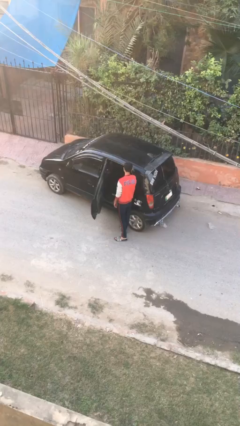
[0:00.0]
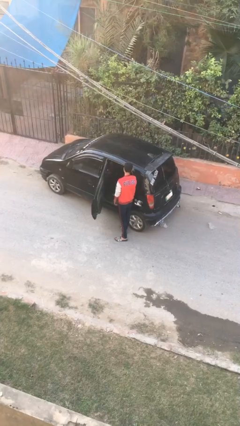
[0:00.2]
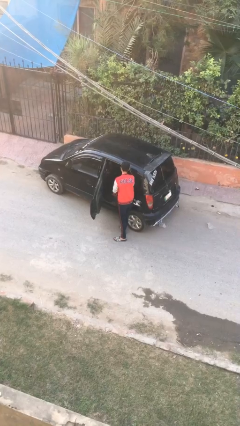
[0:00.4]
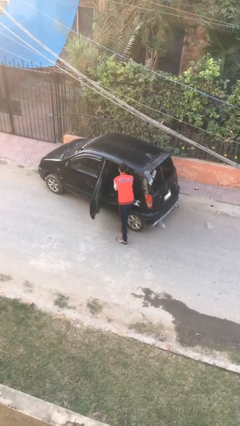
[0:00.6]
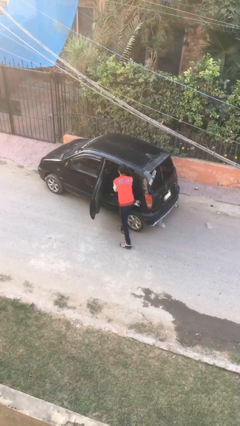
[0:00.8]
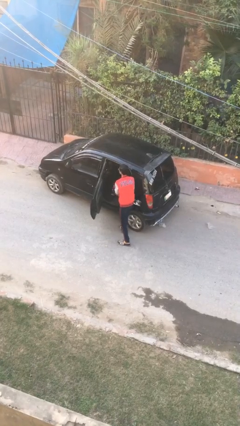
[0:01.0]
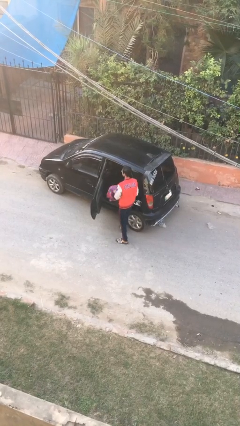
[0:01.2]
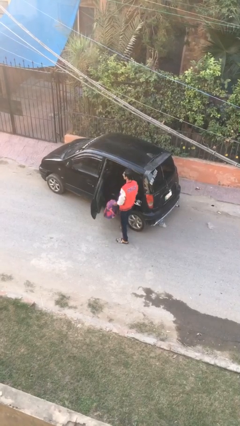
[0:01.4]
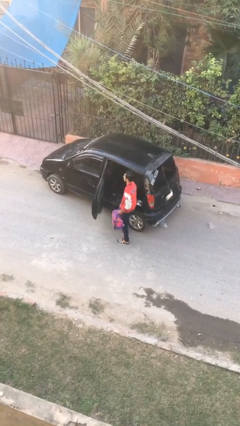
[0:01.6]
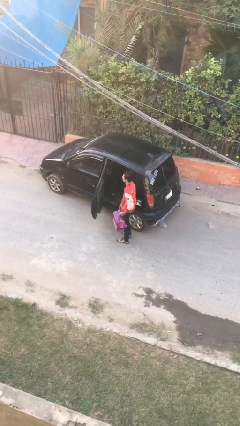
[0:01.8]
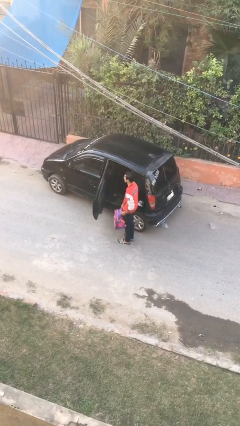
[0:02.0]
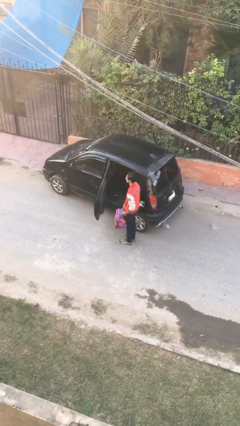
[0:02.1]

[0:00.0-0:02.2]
person unloads car

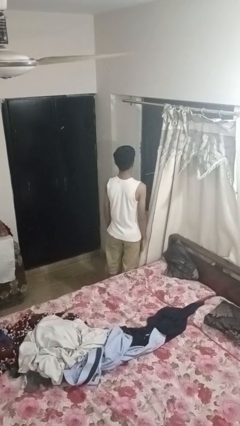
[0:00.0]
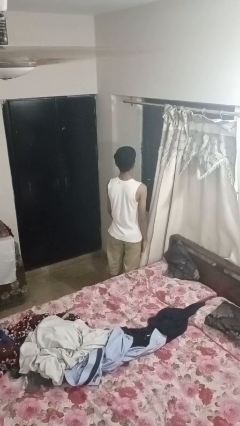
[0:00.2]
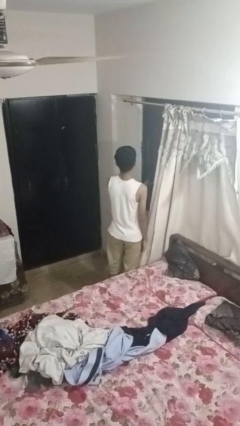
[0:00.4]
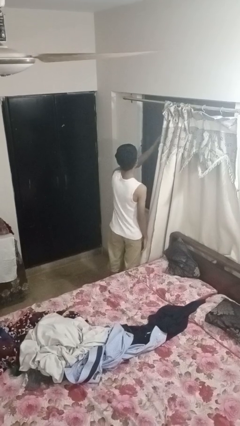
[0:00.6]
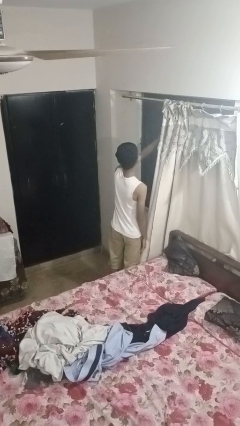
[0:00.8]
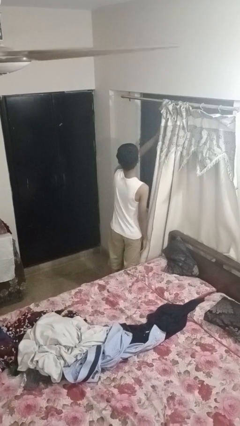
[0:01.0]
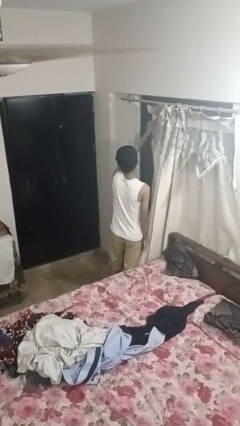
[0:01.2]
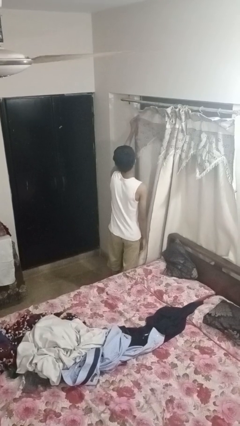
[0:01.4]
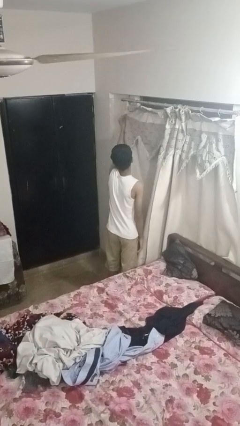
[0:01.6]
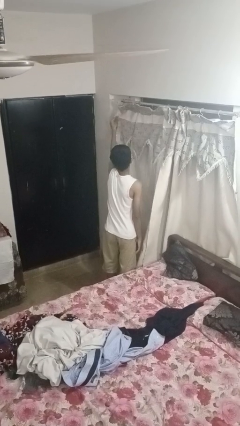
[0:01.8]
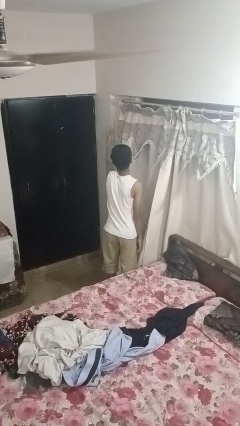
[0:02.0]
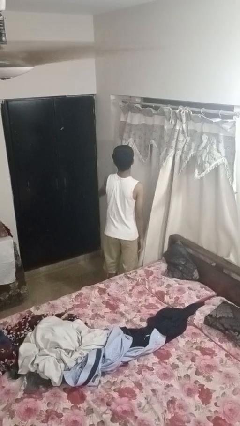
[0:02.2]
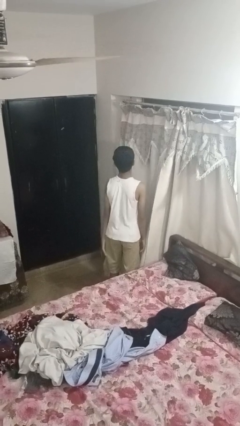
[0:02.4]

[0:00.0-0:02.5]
person closes curtains

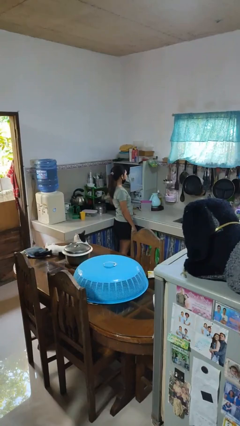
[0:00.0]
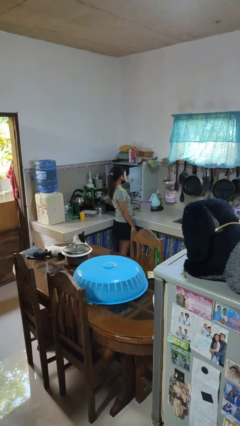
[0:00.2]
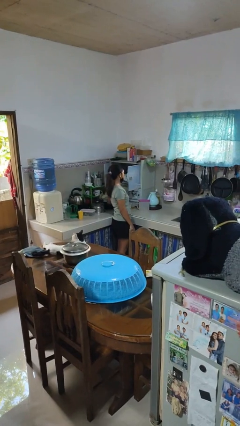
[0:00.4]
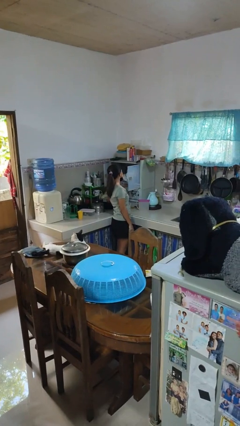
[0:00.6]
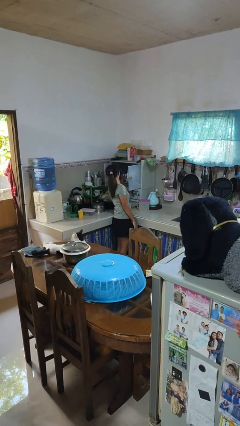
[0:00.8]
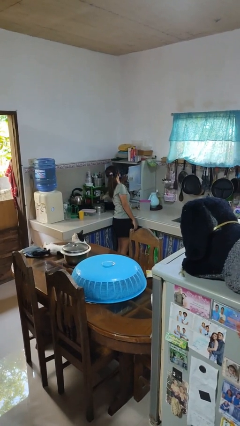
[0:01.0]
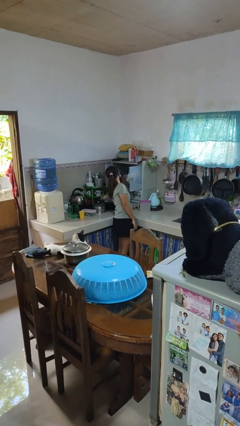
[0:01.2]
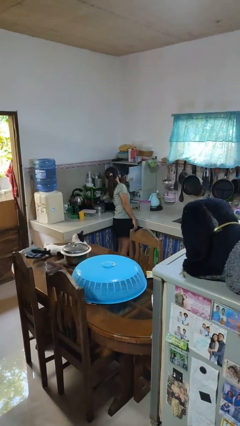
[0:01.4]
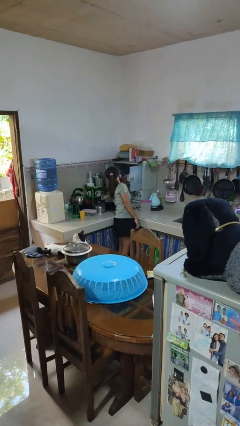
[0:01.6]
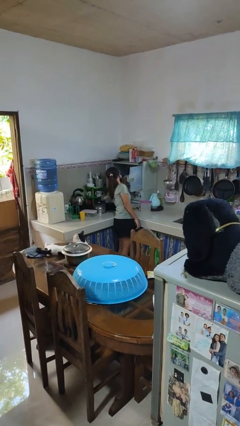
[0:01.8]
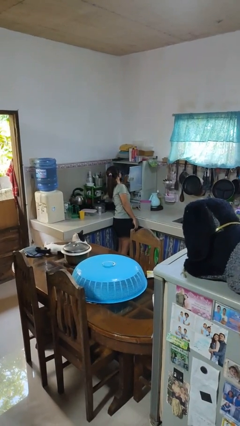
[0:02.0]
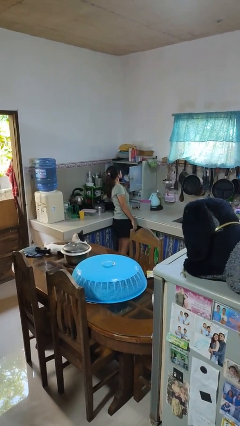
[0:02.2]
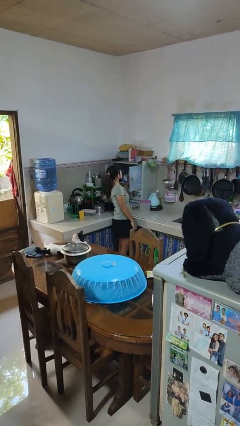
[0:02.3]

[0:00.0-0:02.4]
person searches in kitchen drawer

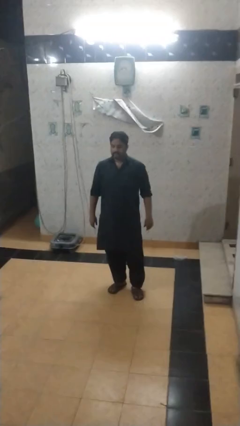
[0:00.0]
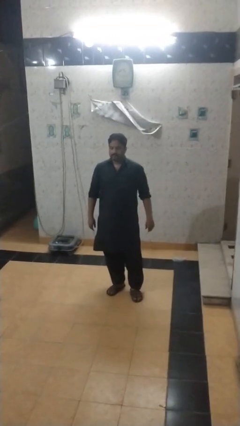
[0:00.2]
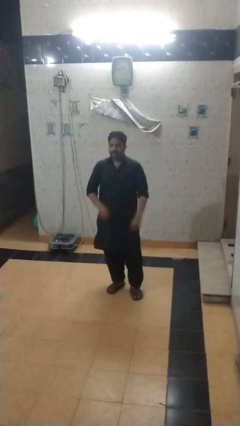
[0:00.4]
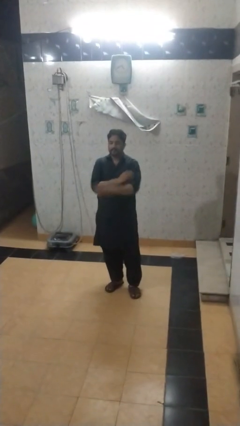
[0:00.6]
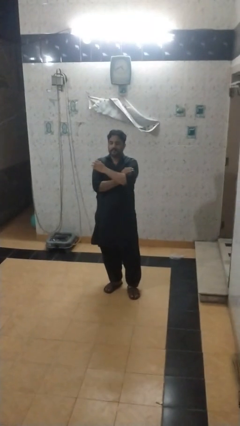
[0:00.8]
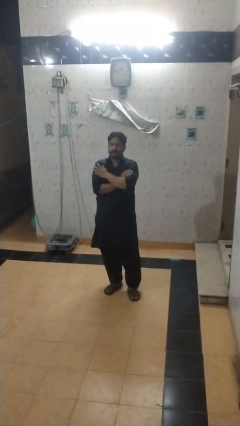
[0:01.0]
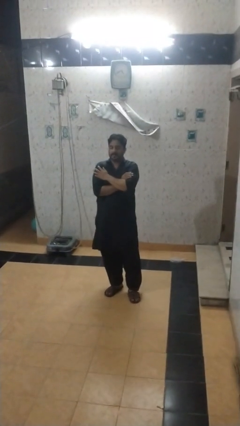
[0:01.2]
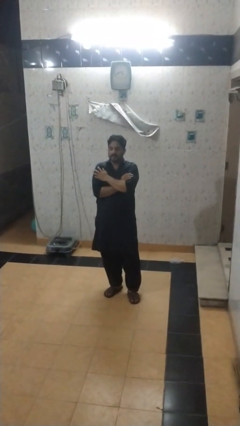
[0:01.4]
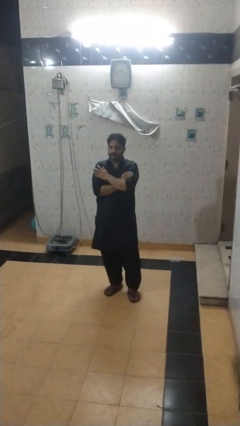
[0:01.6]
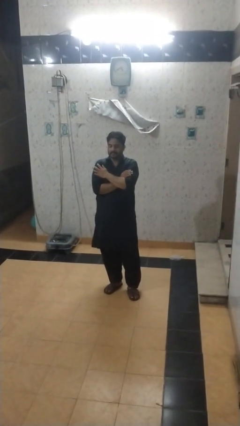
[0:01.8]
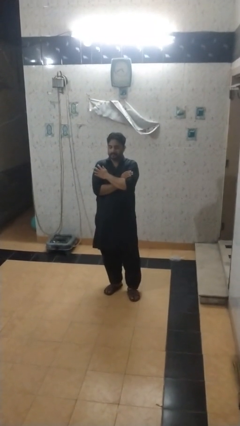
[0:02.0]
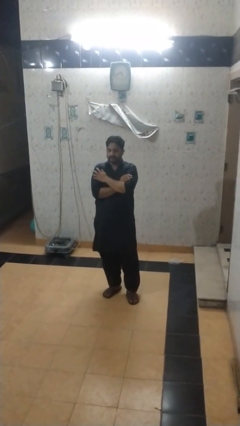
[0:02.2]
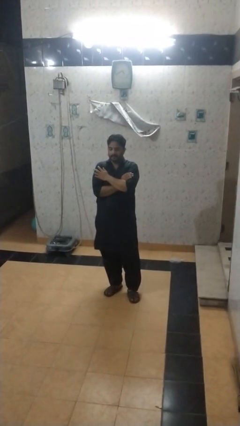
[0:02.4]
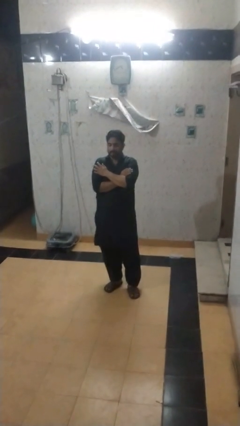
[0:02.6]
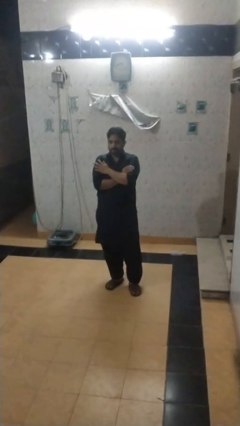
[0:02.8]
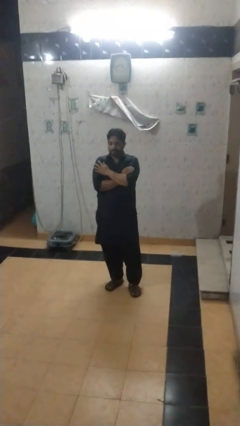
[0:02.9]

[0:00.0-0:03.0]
person crosses arms

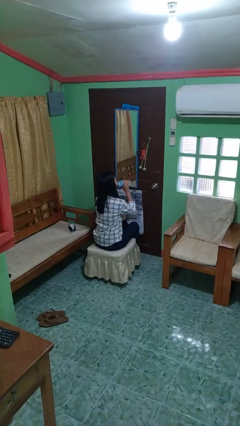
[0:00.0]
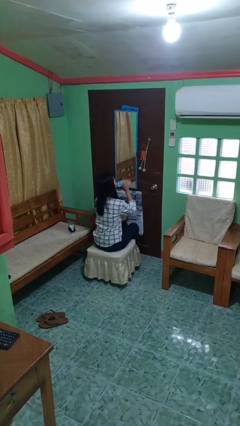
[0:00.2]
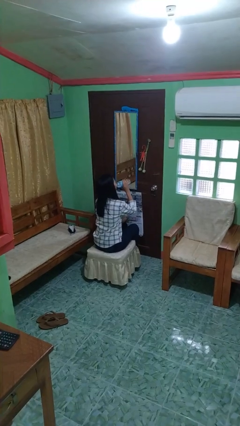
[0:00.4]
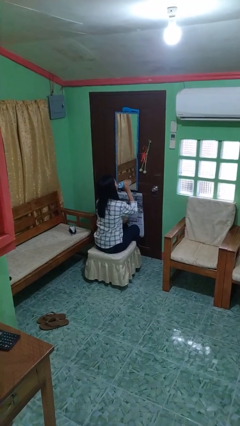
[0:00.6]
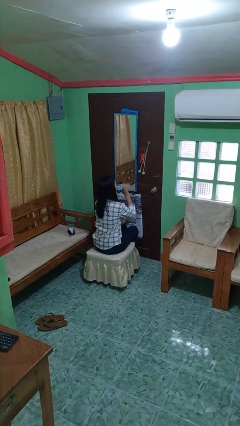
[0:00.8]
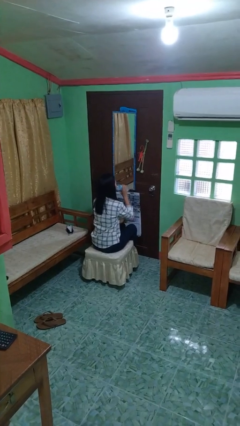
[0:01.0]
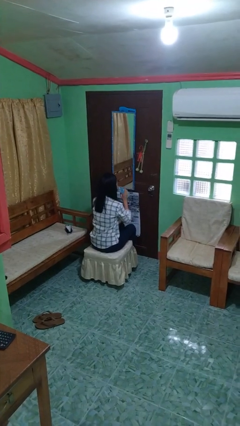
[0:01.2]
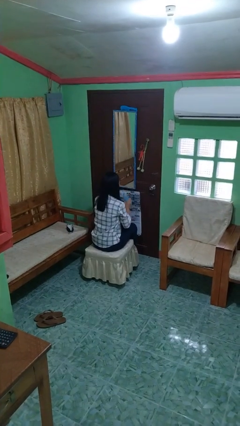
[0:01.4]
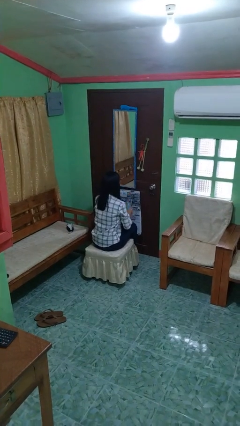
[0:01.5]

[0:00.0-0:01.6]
person drinks from bottle

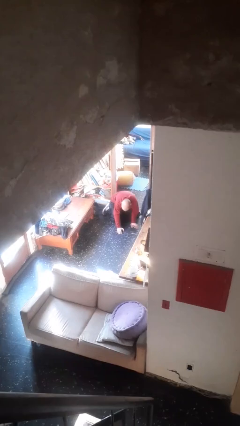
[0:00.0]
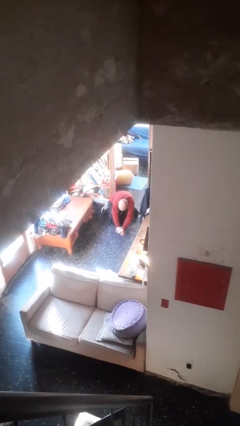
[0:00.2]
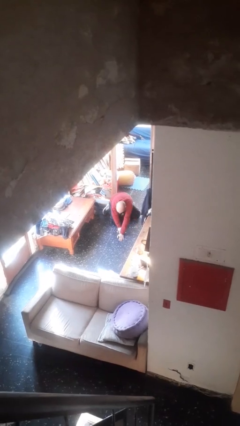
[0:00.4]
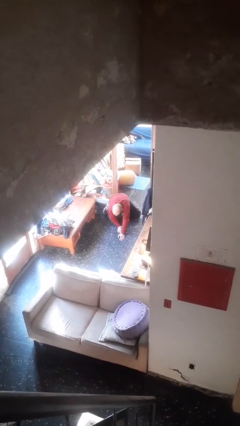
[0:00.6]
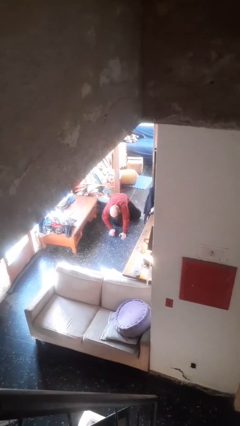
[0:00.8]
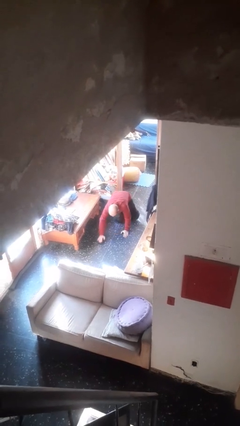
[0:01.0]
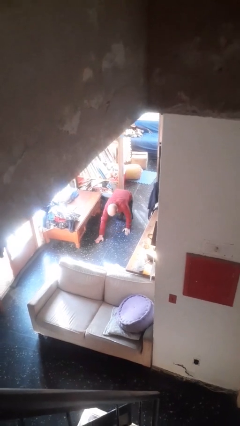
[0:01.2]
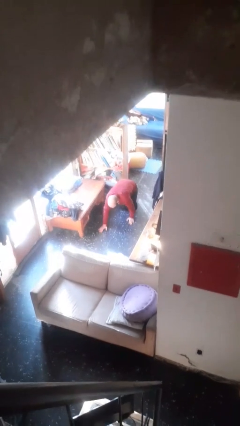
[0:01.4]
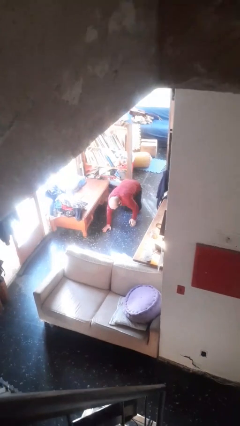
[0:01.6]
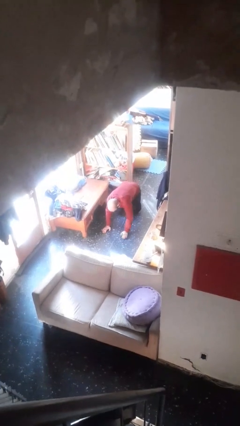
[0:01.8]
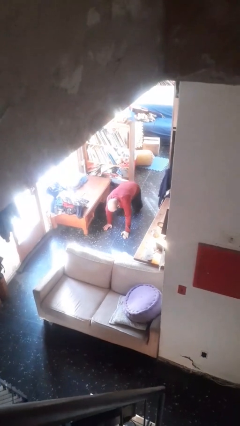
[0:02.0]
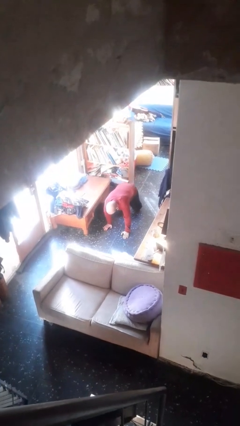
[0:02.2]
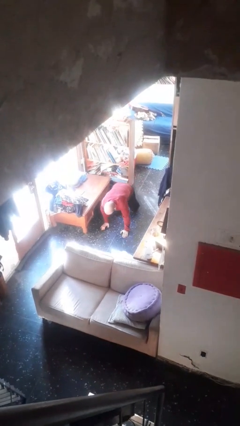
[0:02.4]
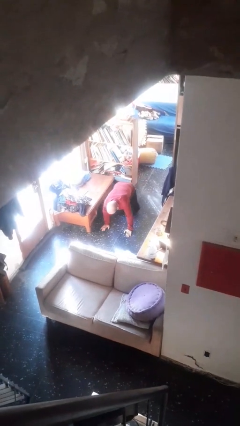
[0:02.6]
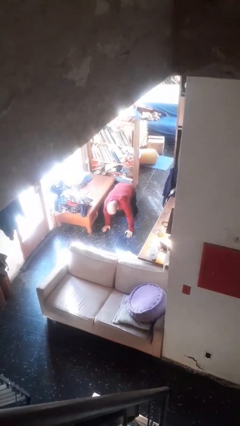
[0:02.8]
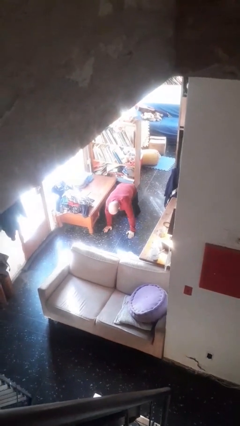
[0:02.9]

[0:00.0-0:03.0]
person crawls

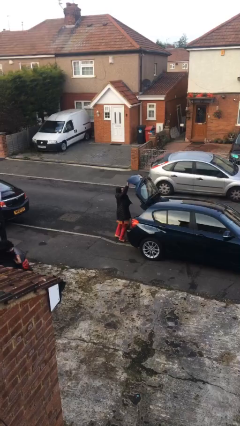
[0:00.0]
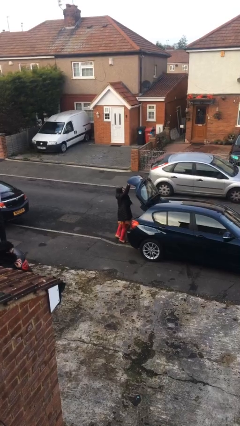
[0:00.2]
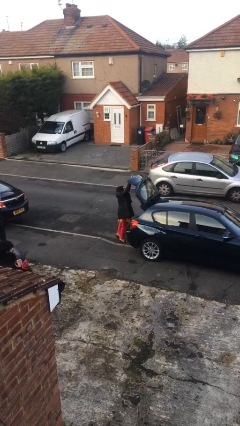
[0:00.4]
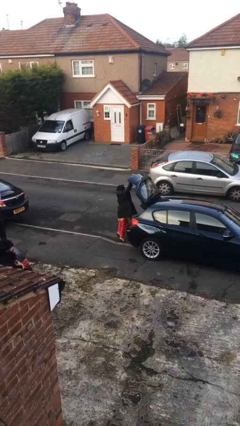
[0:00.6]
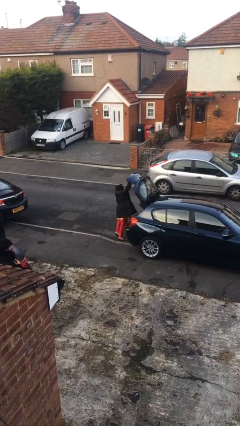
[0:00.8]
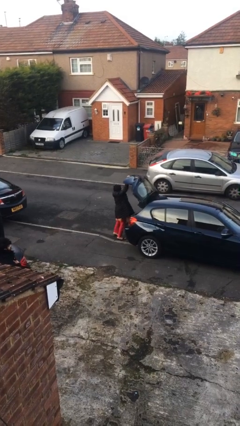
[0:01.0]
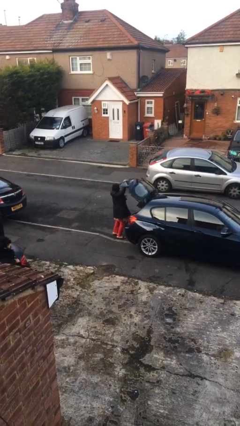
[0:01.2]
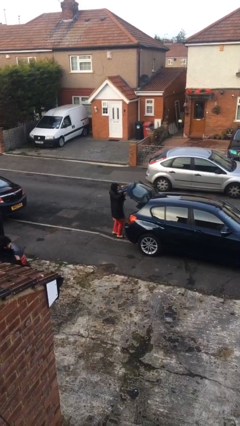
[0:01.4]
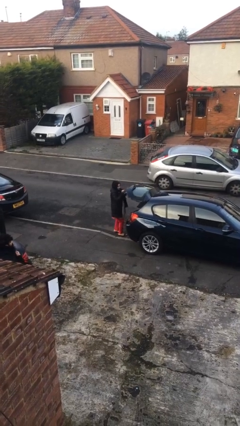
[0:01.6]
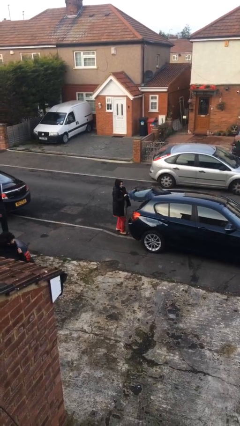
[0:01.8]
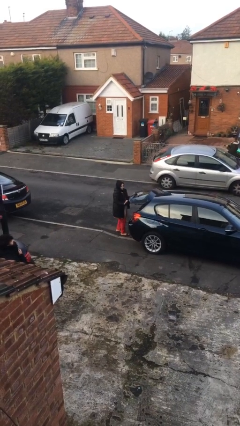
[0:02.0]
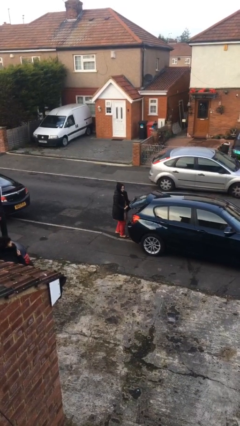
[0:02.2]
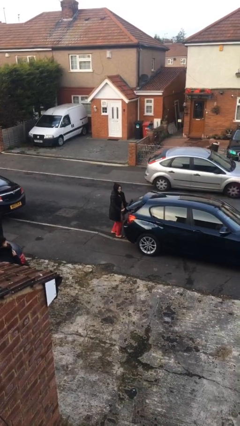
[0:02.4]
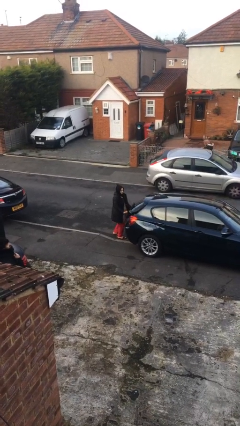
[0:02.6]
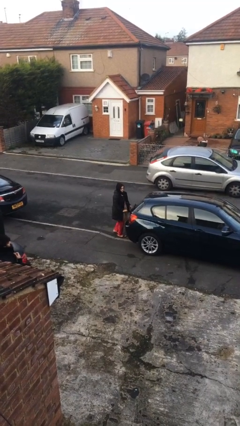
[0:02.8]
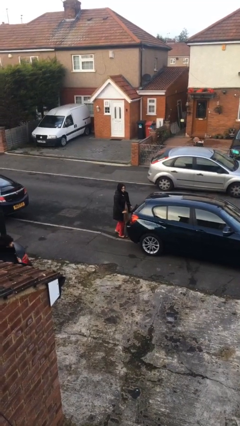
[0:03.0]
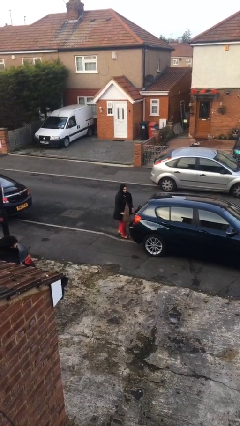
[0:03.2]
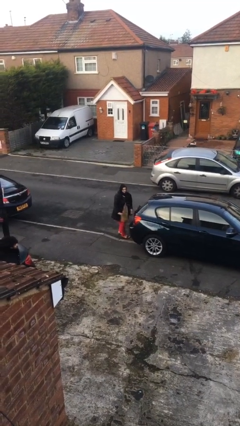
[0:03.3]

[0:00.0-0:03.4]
person closes car trunk
